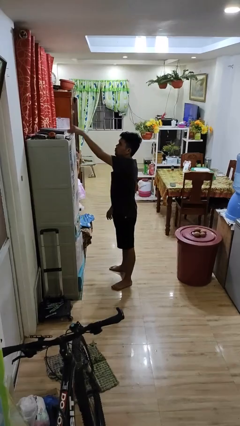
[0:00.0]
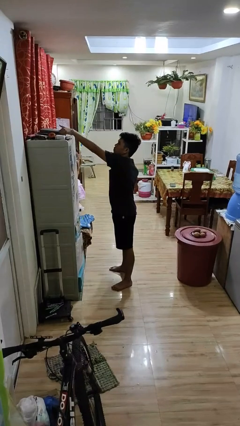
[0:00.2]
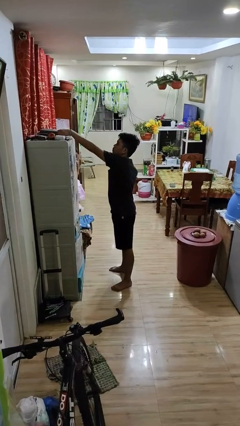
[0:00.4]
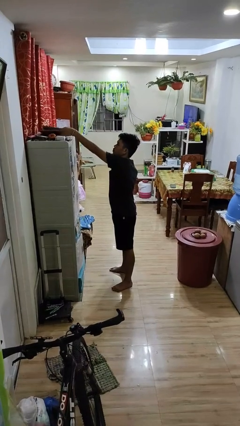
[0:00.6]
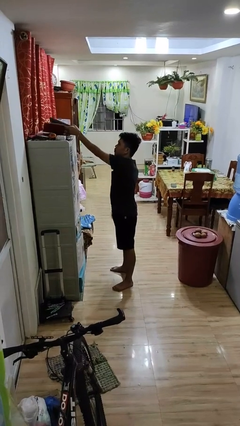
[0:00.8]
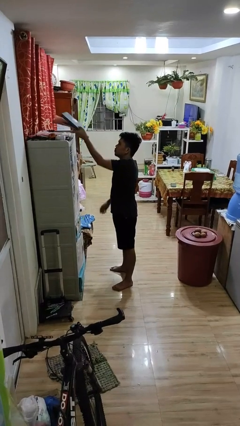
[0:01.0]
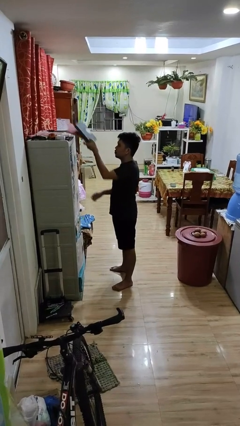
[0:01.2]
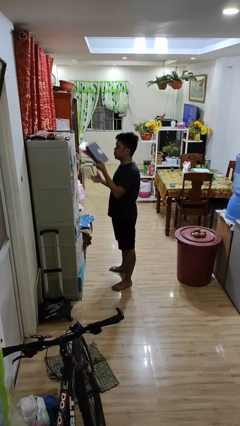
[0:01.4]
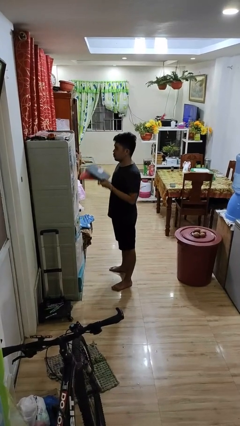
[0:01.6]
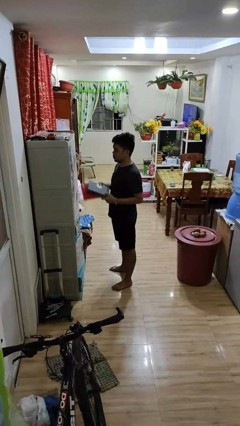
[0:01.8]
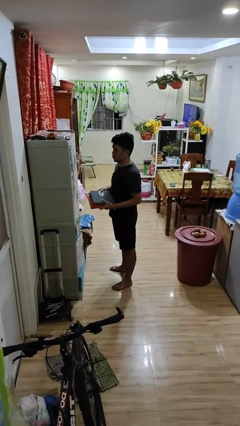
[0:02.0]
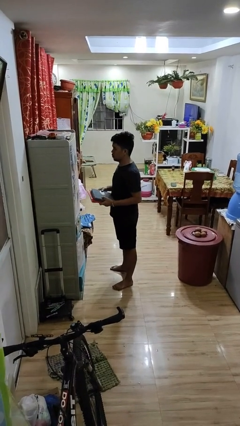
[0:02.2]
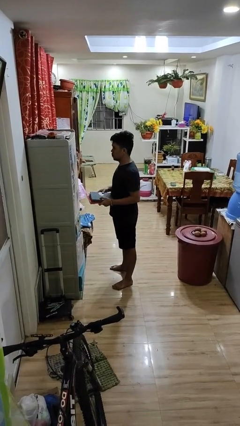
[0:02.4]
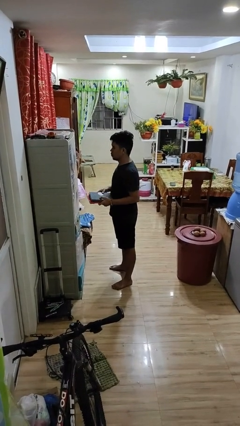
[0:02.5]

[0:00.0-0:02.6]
person picks up object from shelf

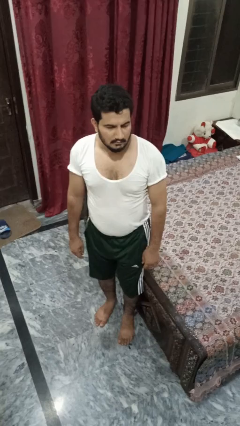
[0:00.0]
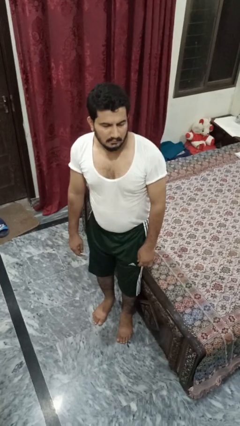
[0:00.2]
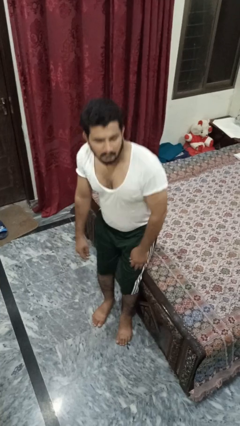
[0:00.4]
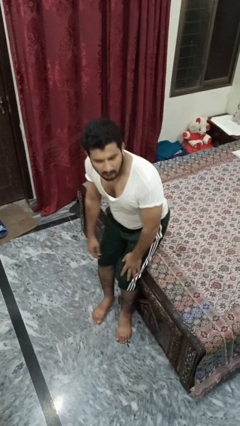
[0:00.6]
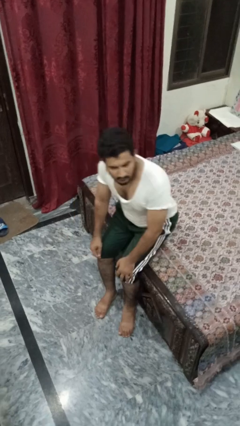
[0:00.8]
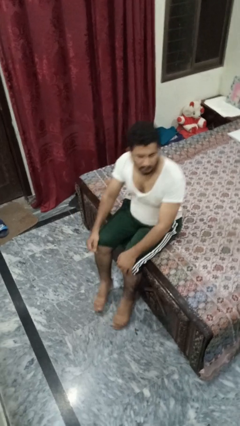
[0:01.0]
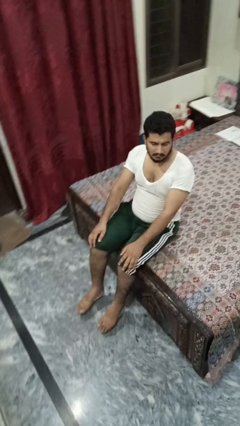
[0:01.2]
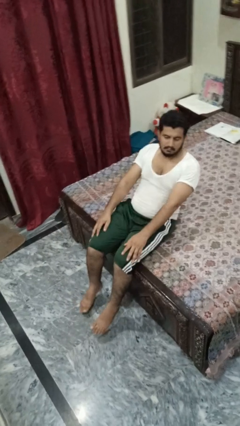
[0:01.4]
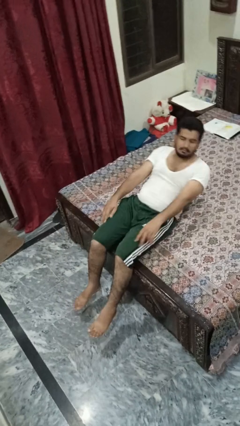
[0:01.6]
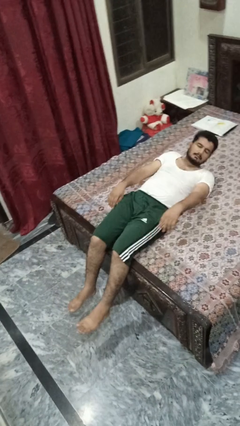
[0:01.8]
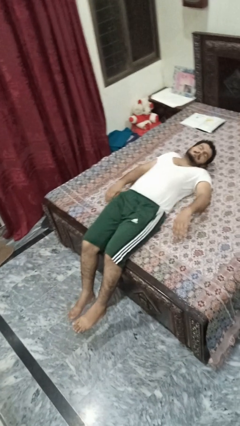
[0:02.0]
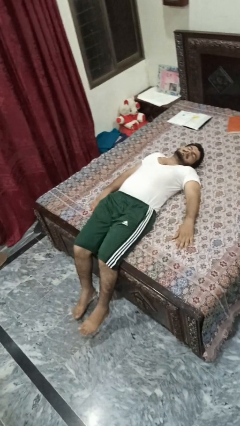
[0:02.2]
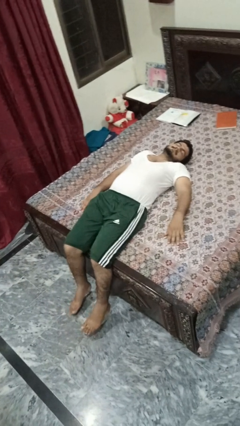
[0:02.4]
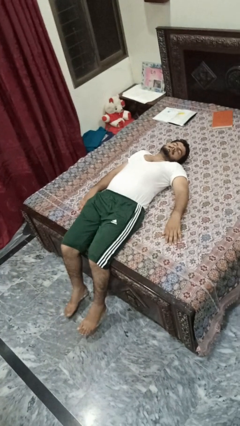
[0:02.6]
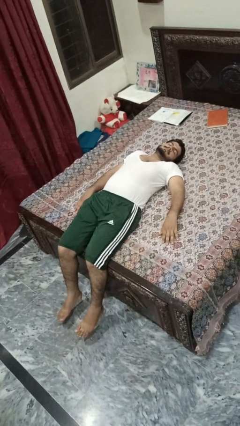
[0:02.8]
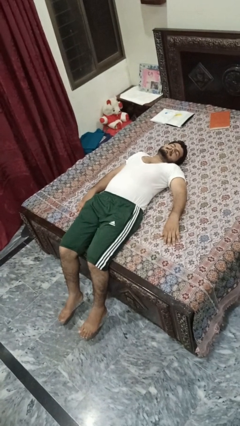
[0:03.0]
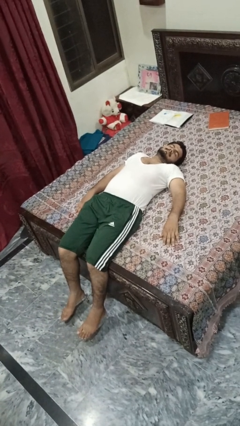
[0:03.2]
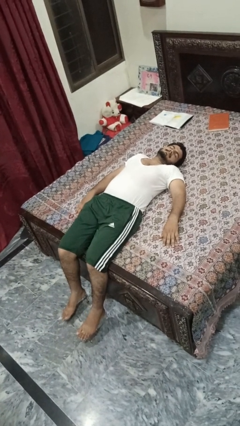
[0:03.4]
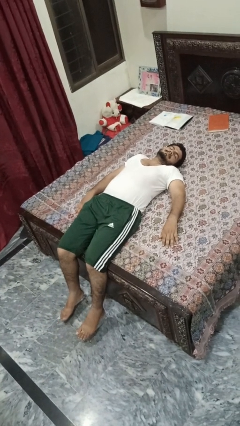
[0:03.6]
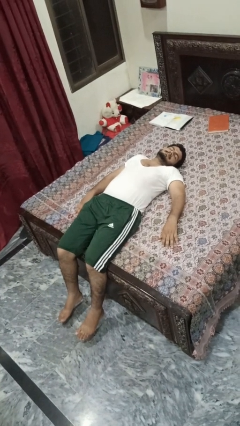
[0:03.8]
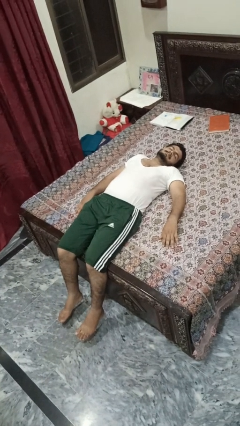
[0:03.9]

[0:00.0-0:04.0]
person lies down on bed

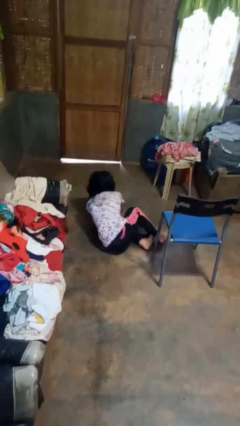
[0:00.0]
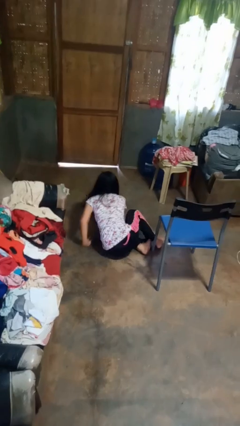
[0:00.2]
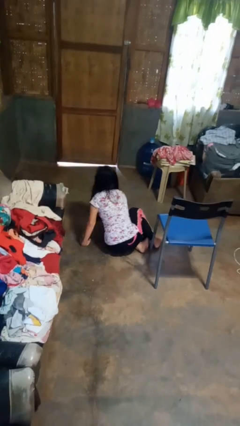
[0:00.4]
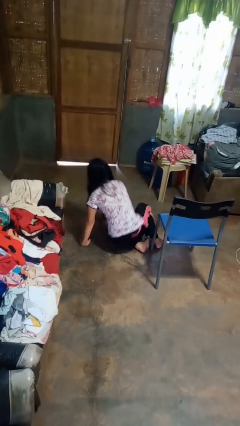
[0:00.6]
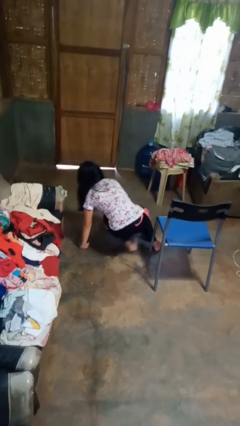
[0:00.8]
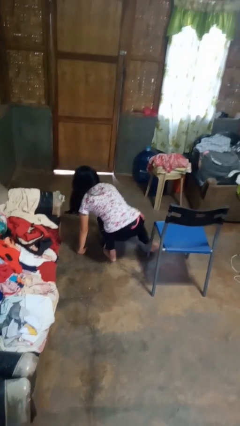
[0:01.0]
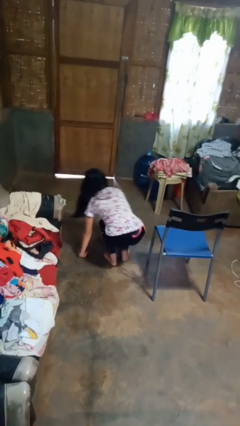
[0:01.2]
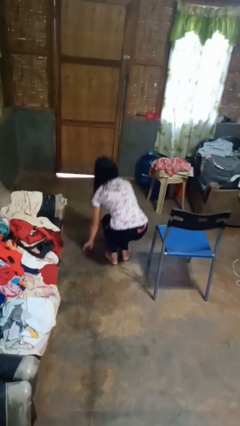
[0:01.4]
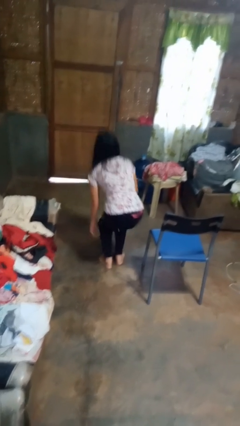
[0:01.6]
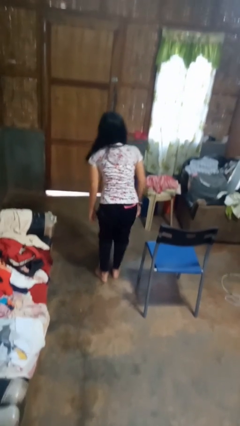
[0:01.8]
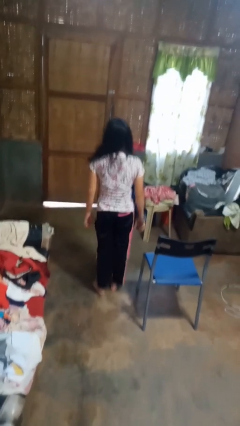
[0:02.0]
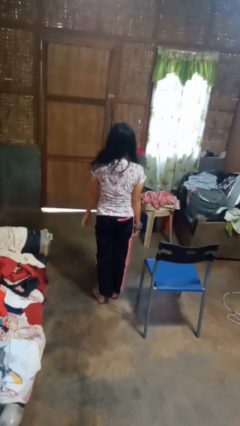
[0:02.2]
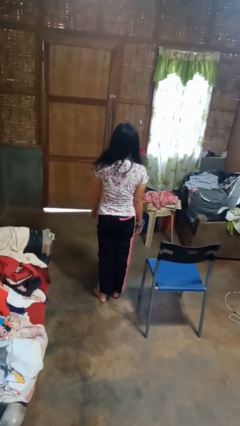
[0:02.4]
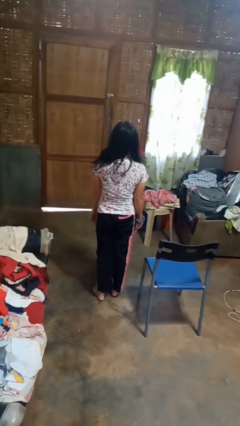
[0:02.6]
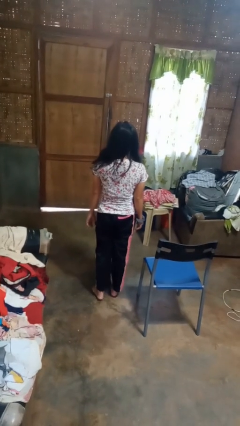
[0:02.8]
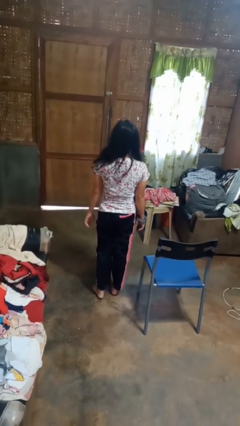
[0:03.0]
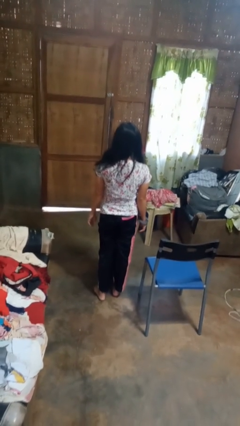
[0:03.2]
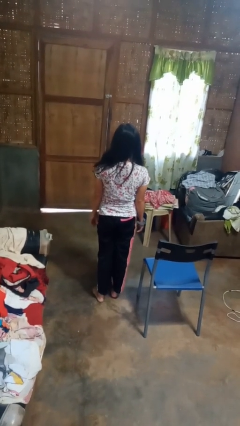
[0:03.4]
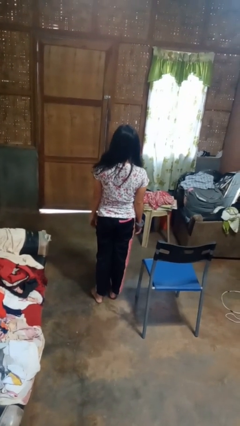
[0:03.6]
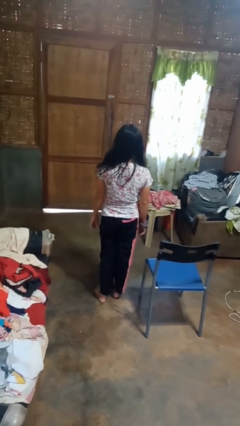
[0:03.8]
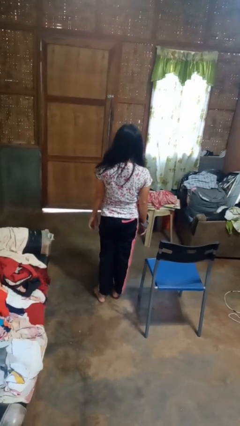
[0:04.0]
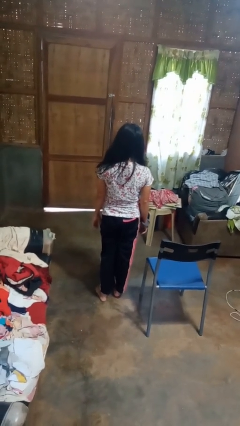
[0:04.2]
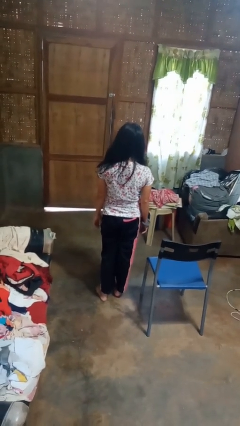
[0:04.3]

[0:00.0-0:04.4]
person stands up from floor

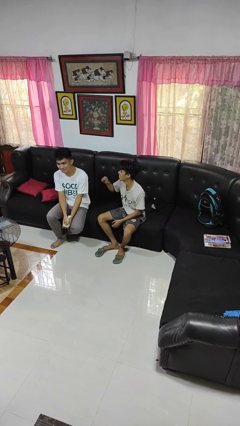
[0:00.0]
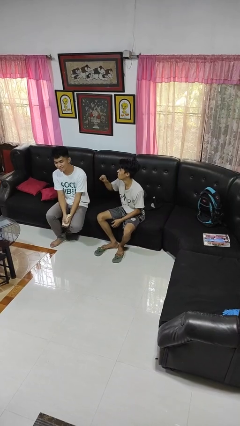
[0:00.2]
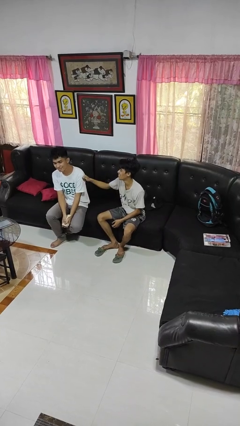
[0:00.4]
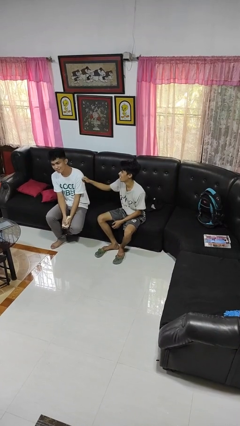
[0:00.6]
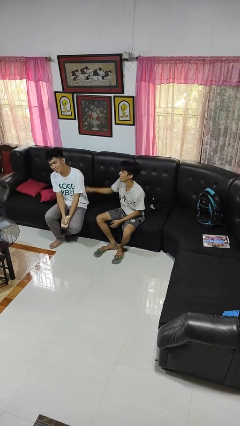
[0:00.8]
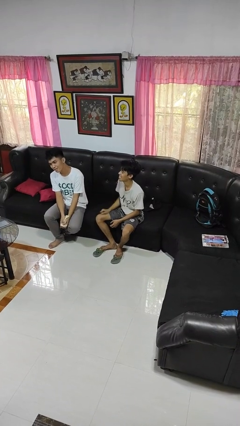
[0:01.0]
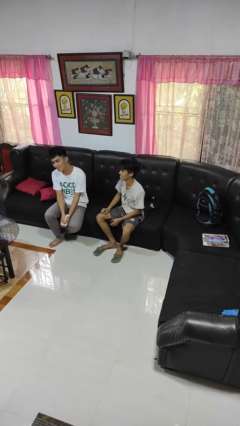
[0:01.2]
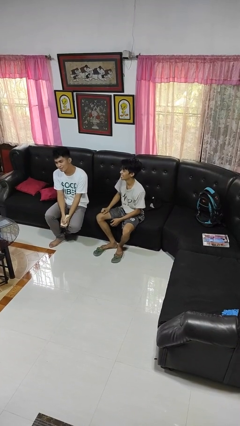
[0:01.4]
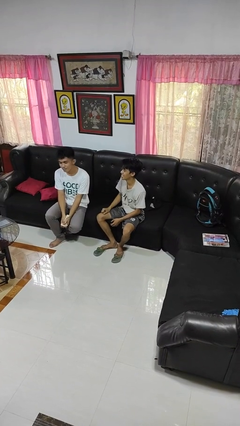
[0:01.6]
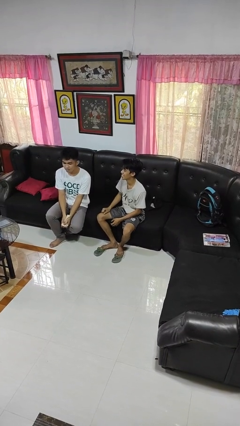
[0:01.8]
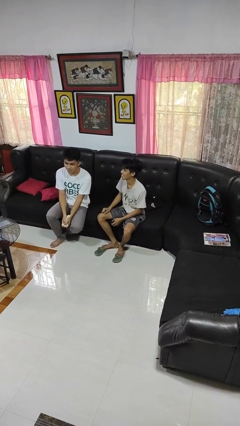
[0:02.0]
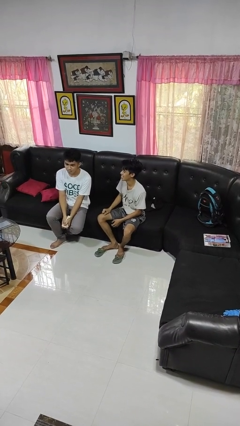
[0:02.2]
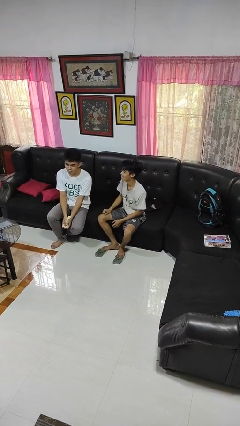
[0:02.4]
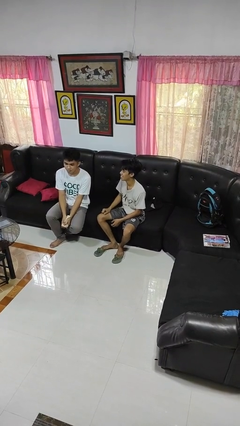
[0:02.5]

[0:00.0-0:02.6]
person pounds shoulders of person

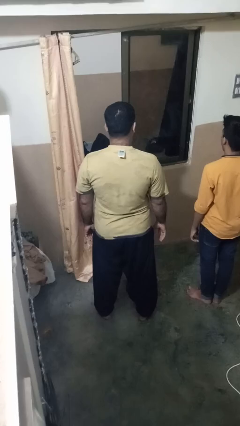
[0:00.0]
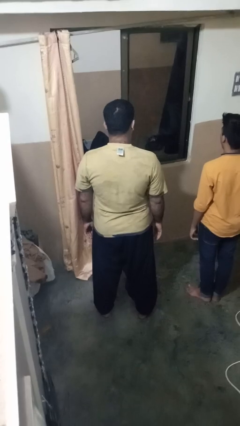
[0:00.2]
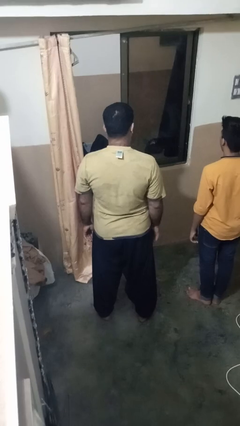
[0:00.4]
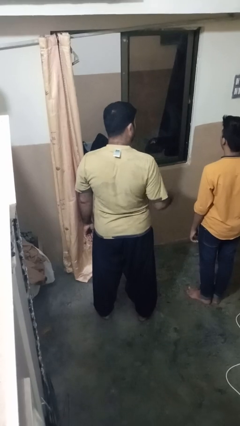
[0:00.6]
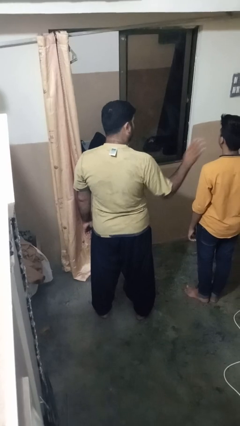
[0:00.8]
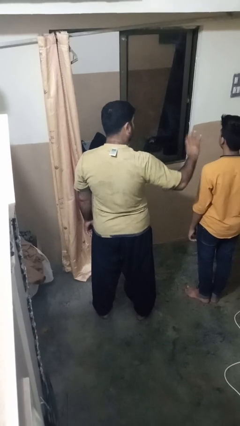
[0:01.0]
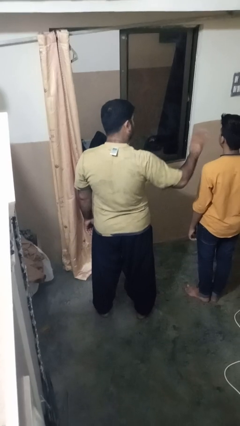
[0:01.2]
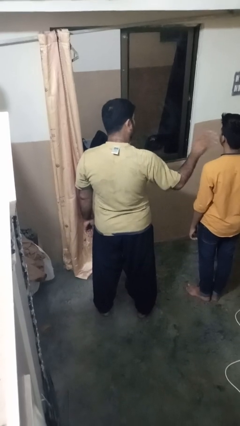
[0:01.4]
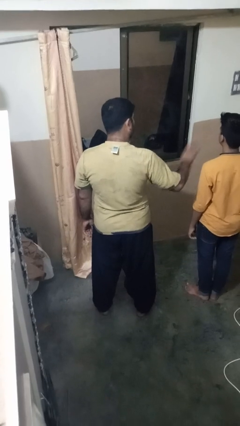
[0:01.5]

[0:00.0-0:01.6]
person waves at person

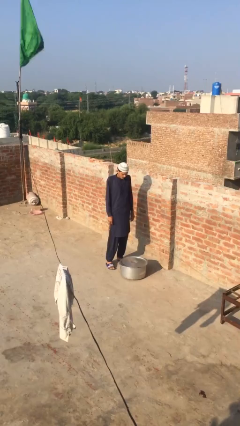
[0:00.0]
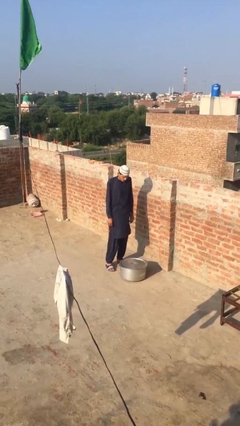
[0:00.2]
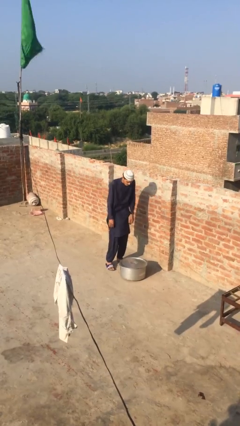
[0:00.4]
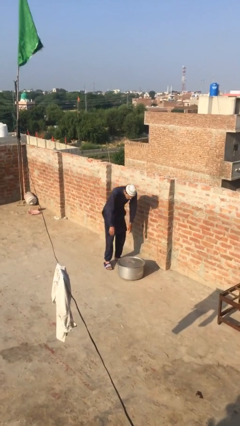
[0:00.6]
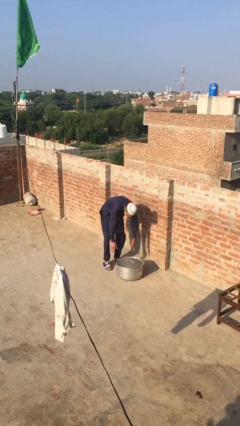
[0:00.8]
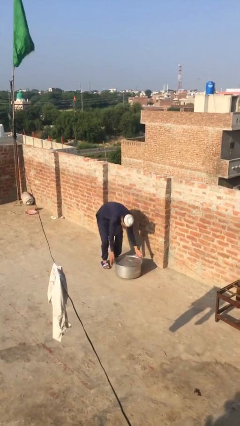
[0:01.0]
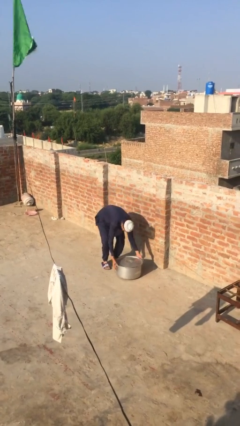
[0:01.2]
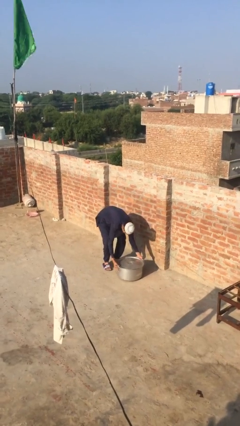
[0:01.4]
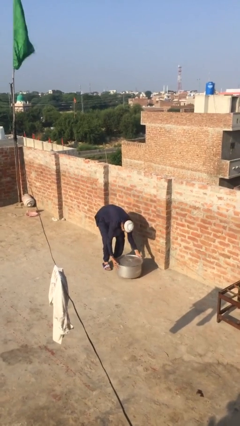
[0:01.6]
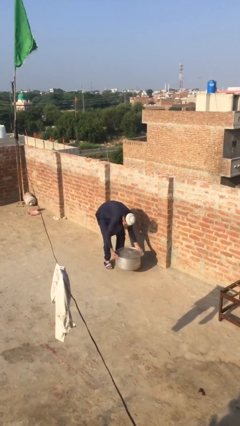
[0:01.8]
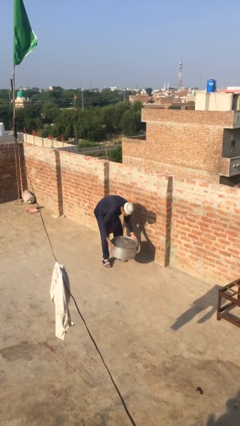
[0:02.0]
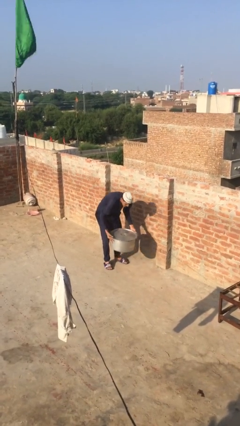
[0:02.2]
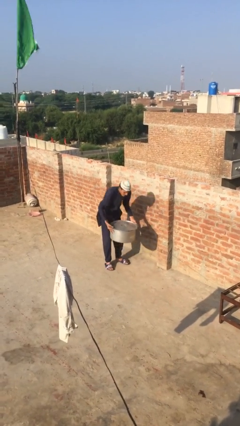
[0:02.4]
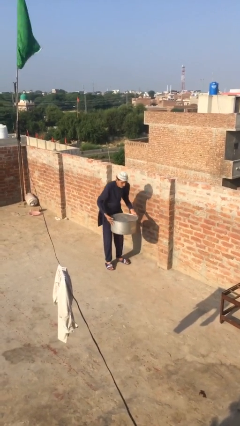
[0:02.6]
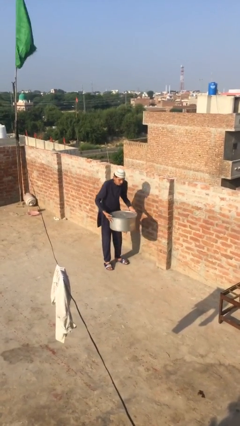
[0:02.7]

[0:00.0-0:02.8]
person picks up object from floor
